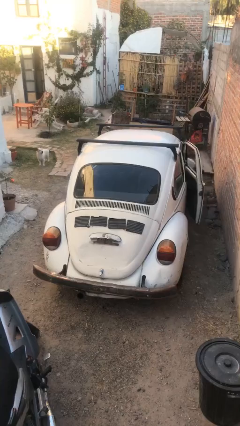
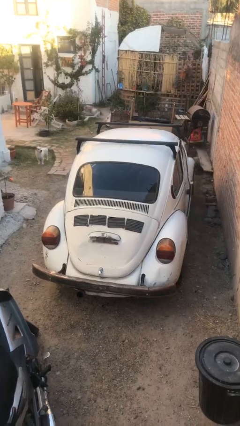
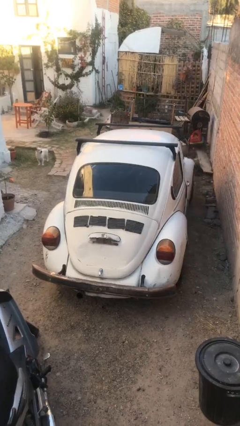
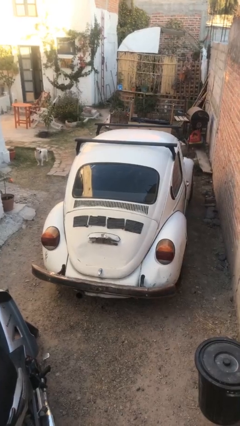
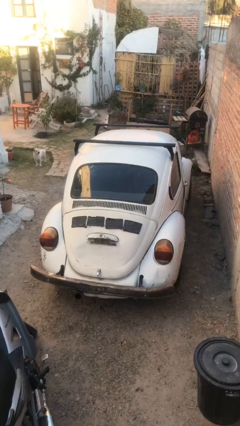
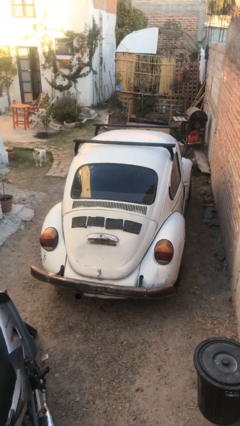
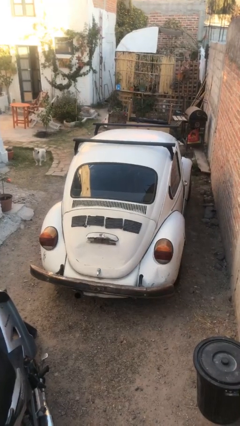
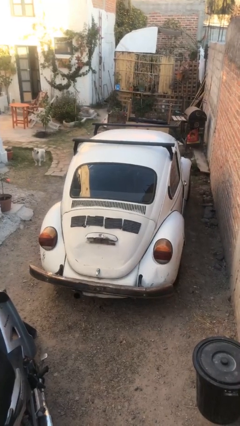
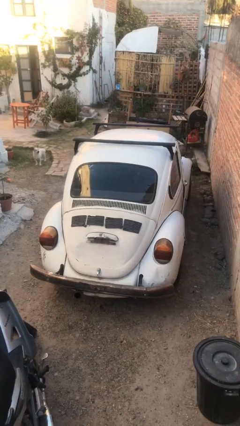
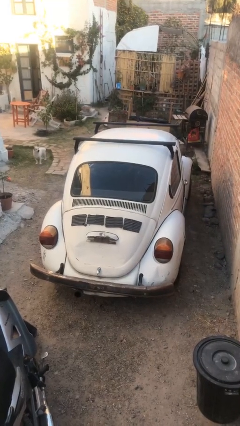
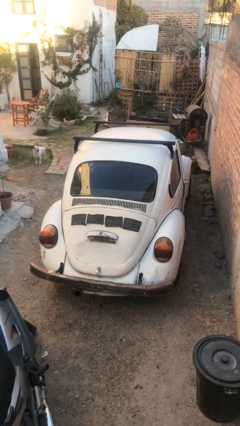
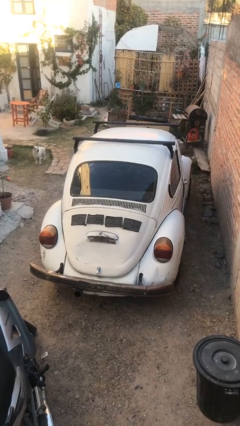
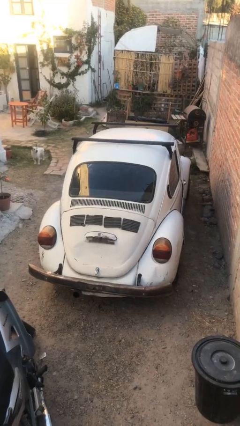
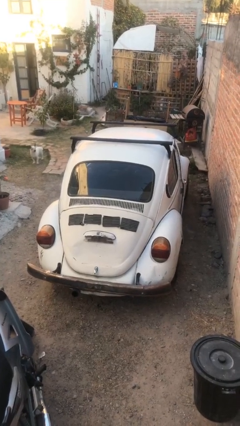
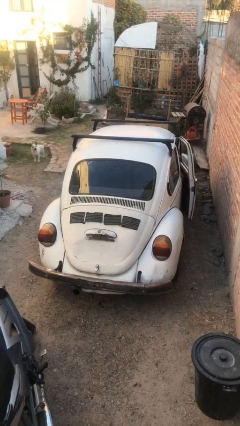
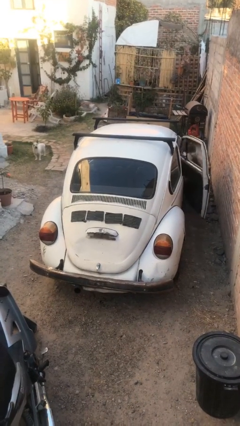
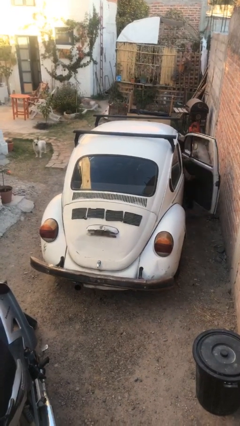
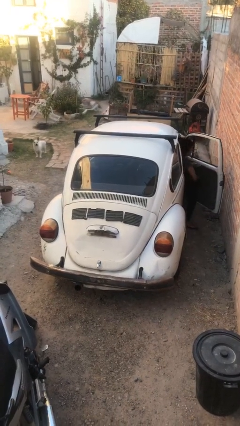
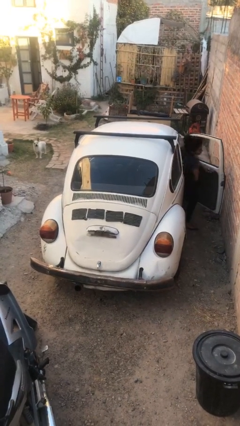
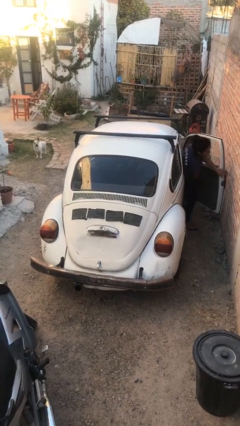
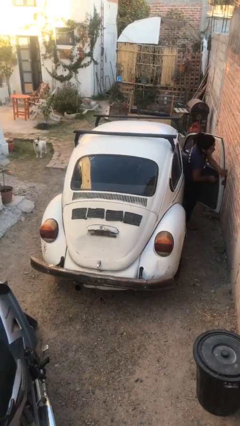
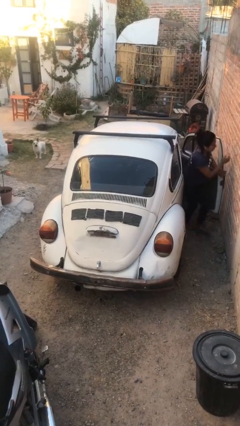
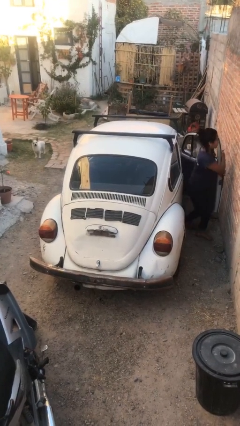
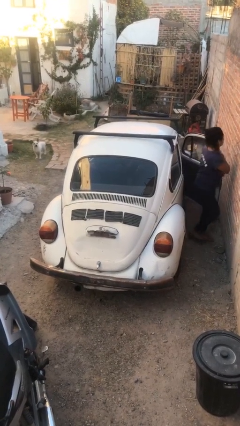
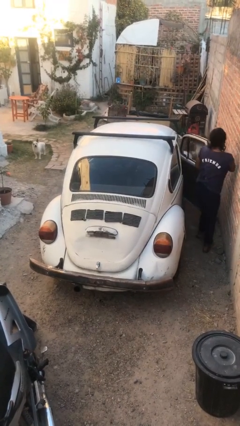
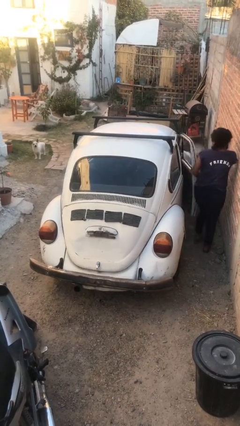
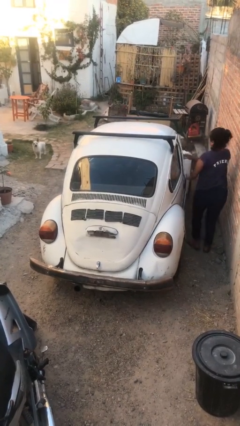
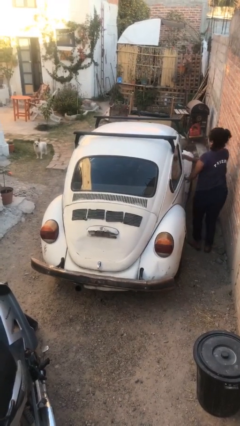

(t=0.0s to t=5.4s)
car drops off person

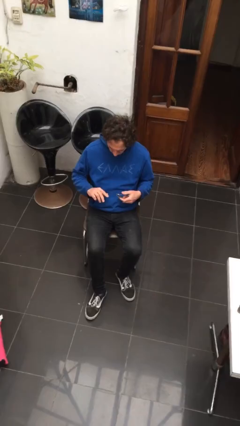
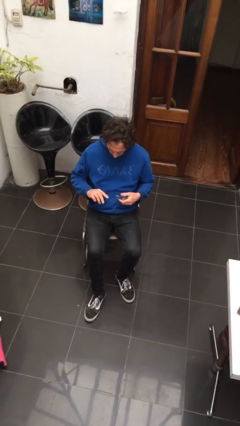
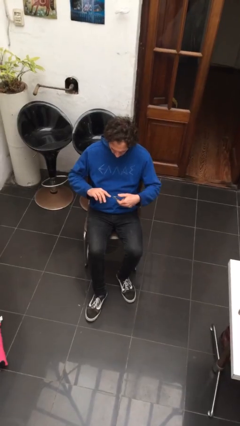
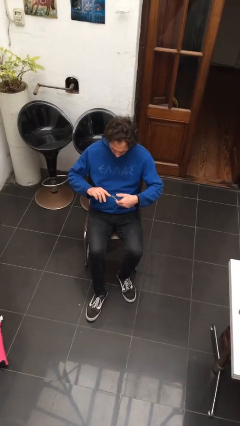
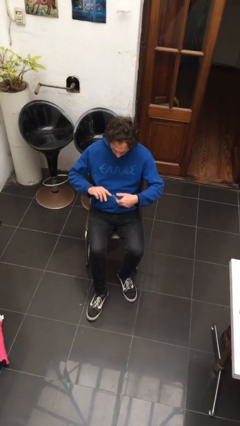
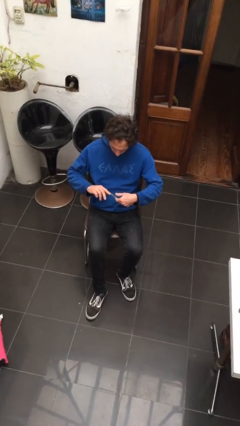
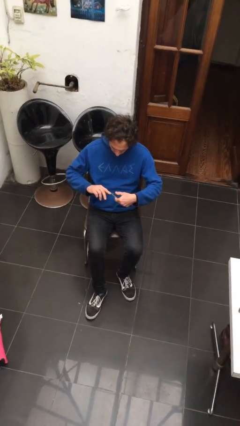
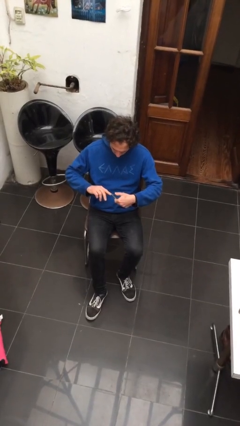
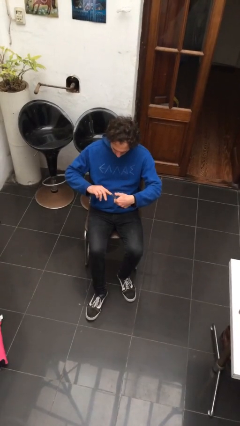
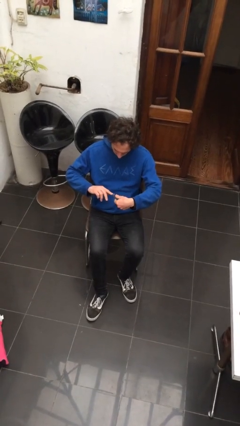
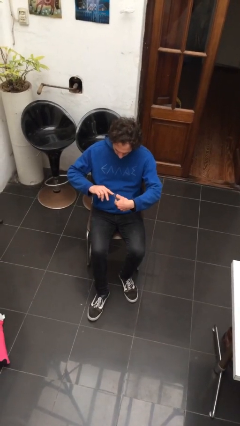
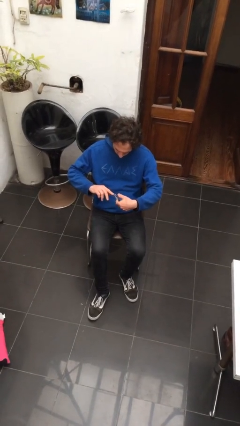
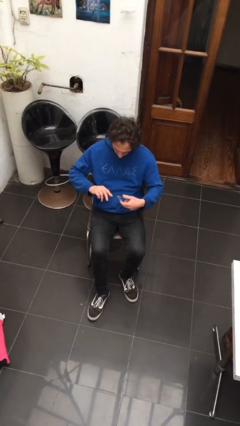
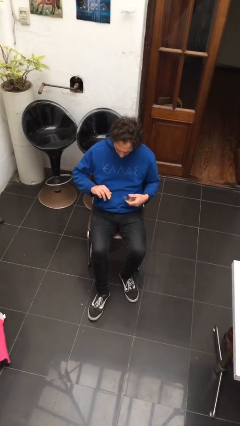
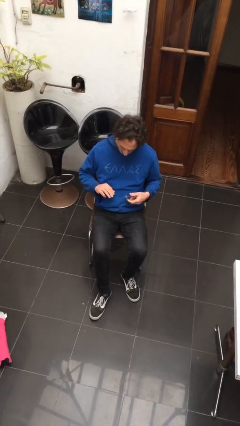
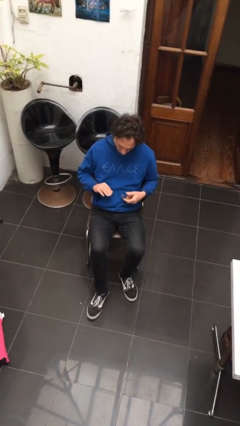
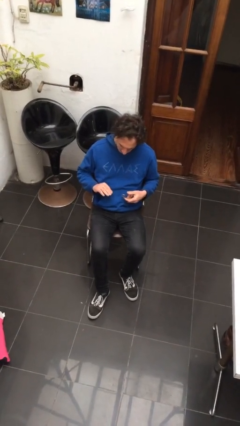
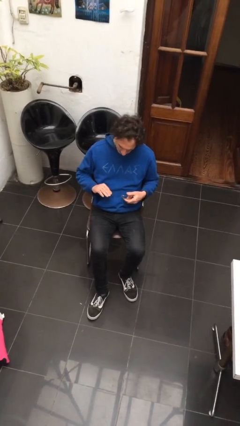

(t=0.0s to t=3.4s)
person clips fingernails

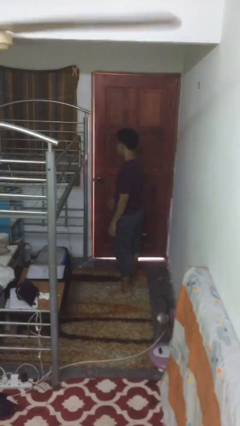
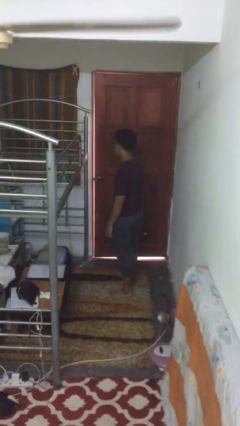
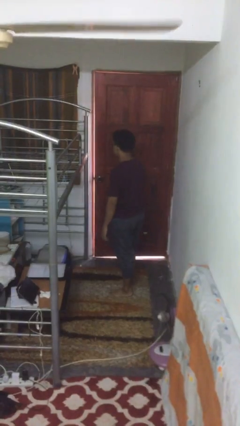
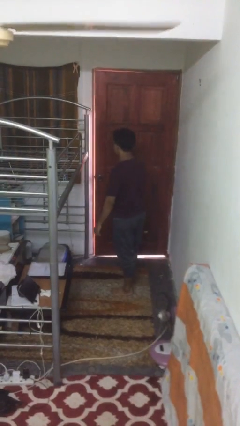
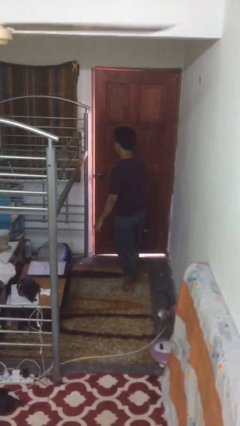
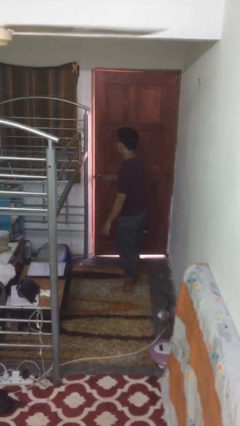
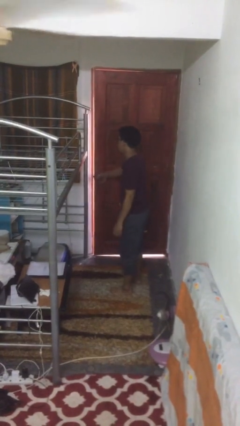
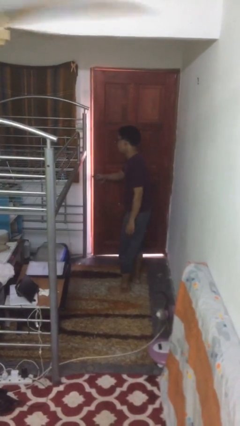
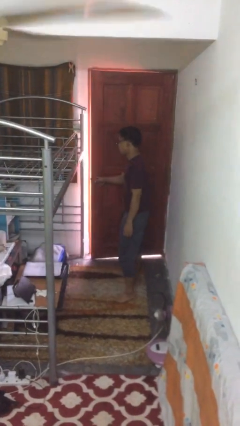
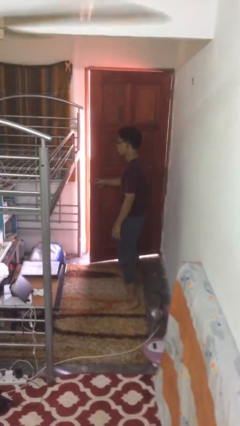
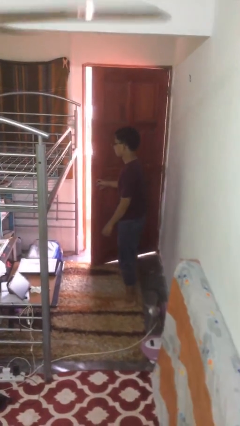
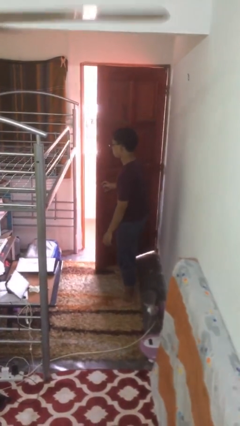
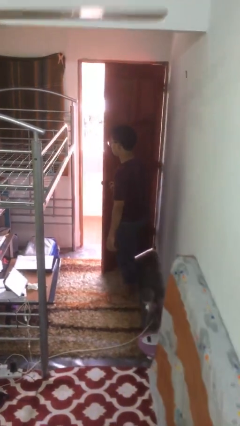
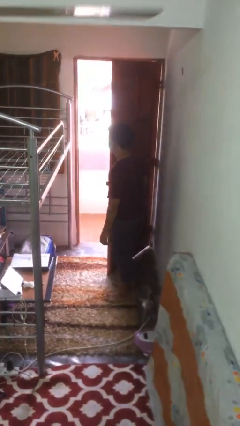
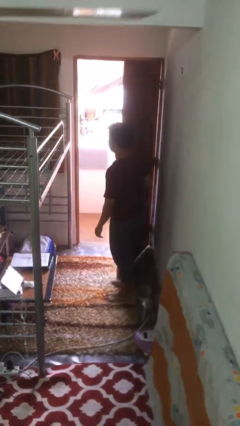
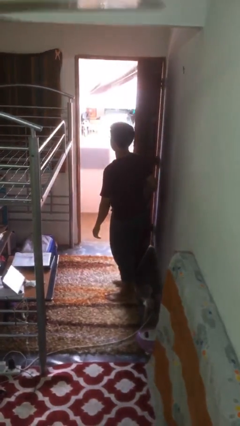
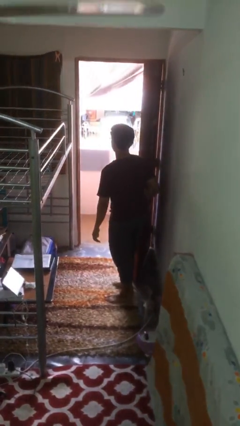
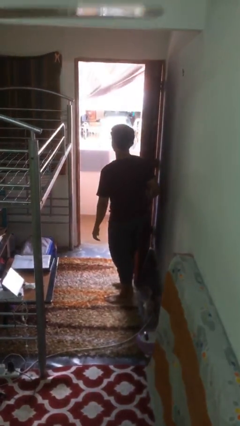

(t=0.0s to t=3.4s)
person opens facility door

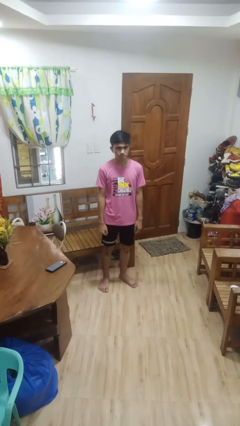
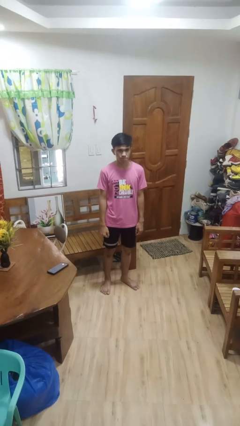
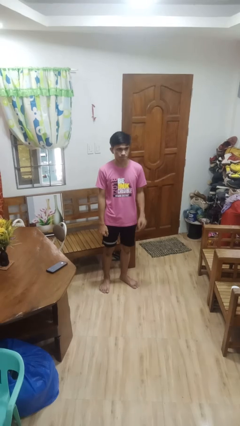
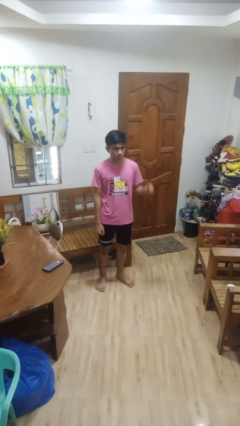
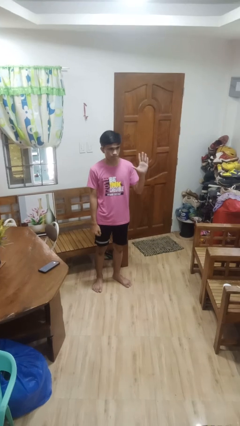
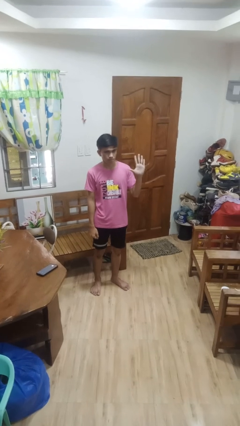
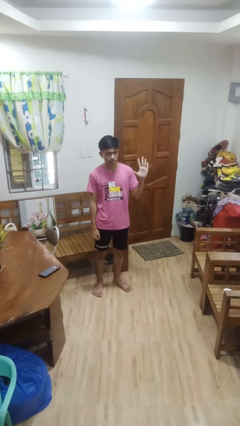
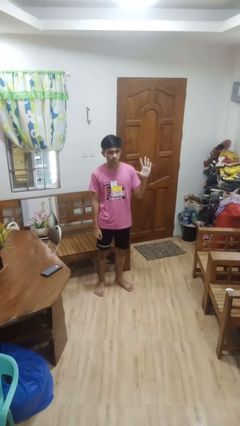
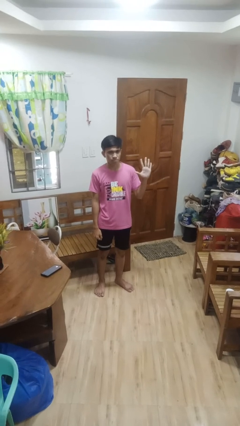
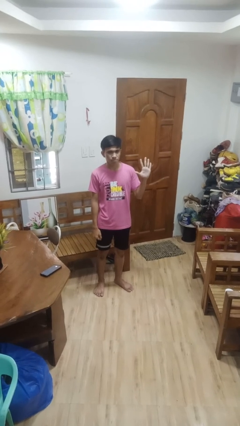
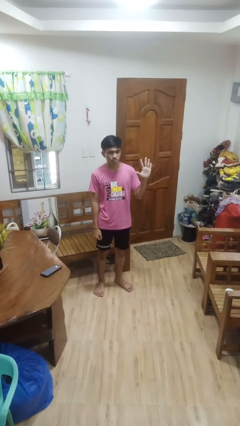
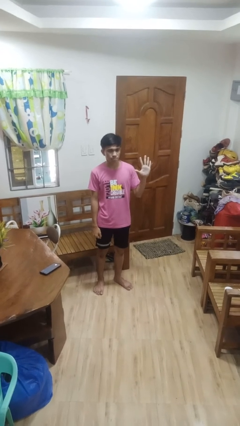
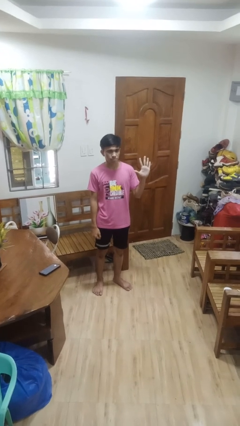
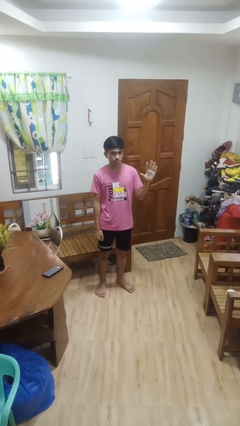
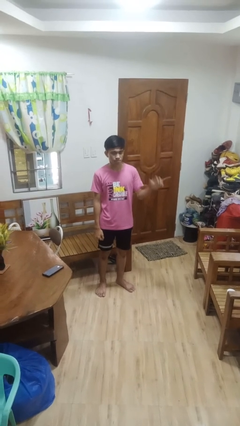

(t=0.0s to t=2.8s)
person gestures number five

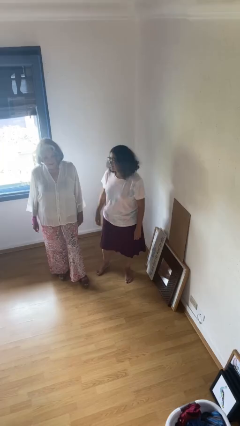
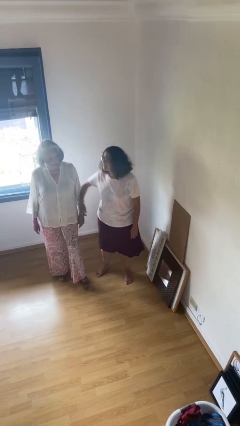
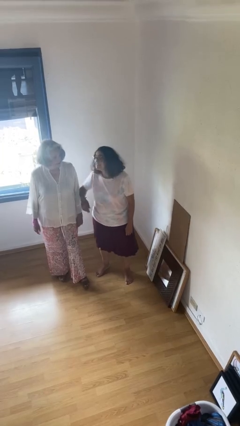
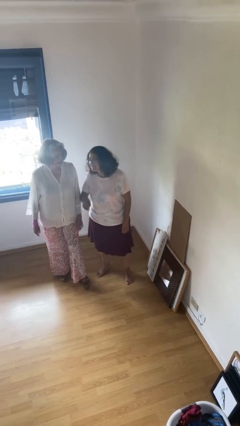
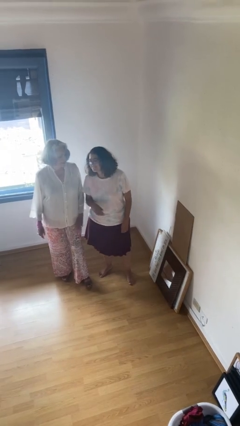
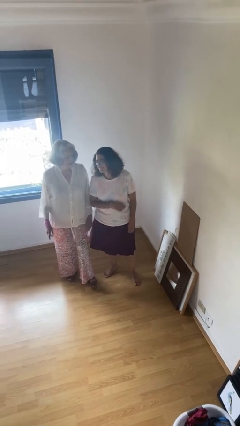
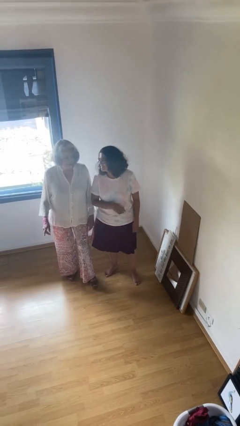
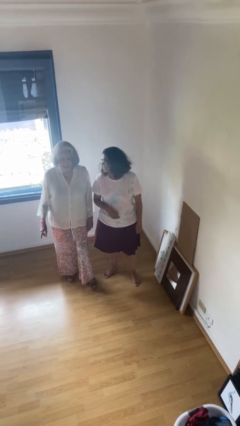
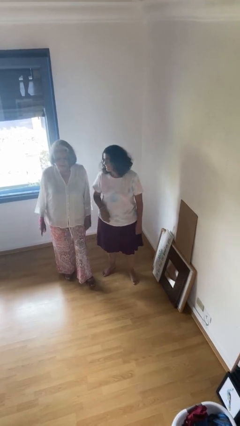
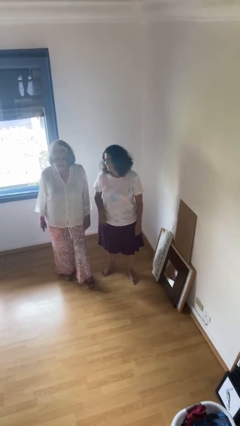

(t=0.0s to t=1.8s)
person nudges person with elbow

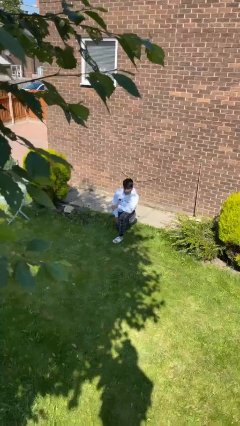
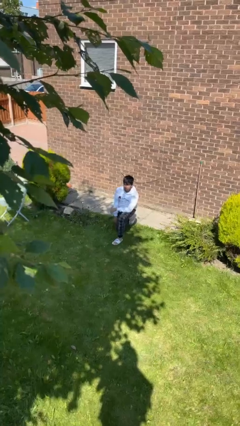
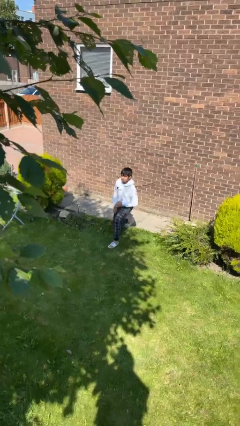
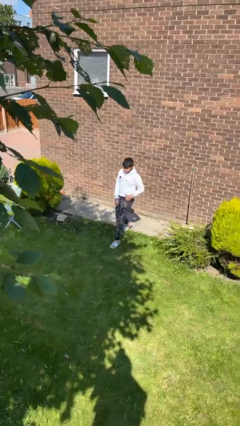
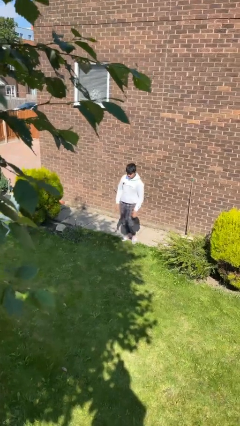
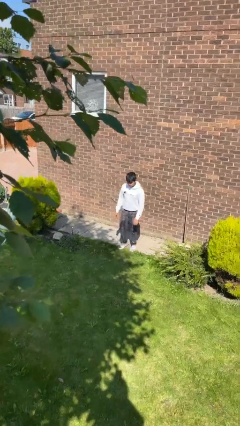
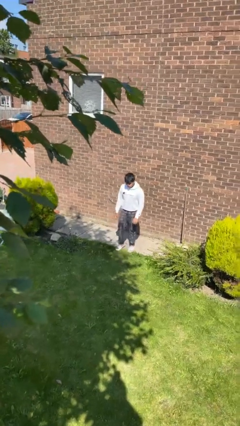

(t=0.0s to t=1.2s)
person stands up from floor
